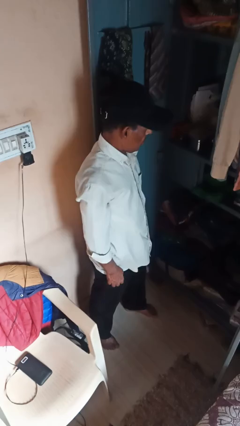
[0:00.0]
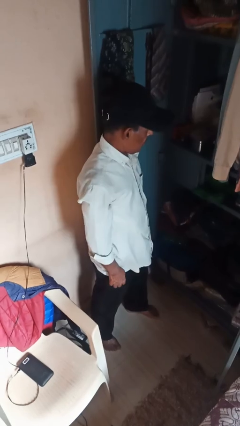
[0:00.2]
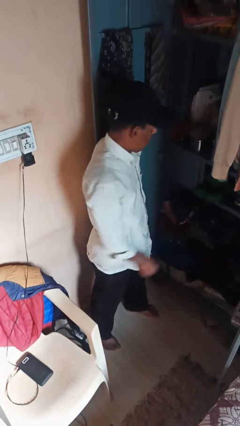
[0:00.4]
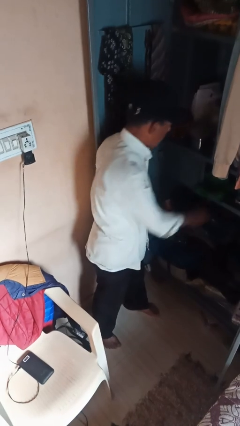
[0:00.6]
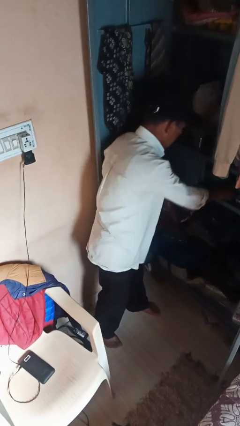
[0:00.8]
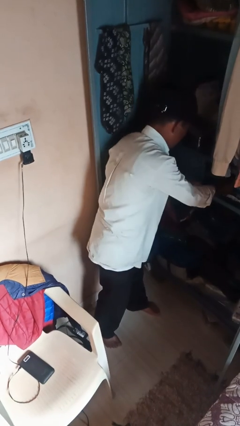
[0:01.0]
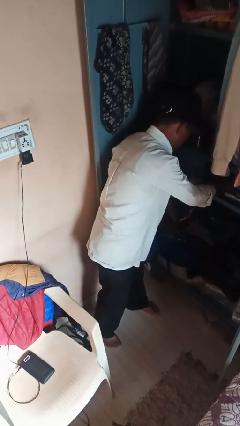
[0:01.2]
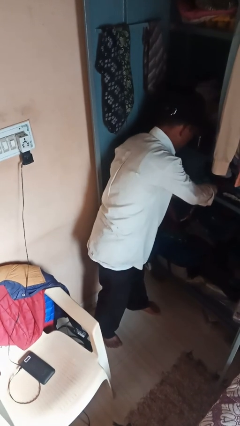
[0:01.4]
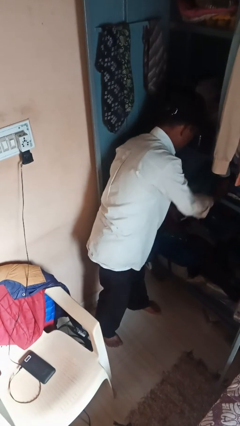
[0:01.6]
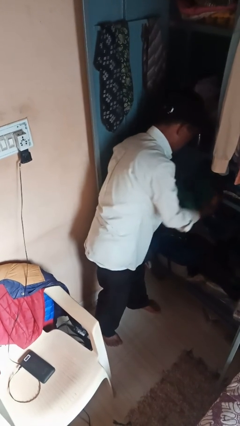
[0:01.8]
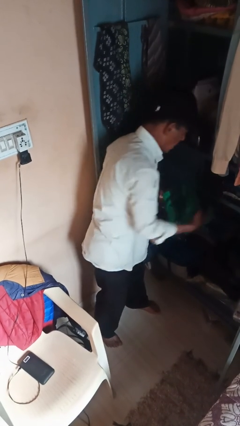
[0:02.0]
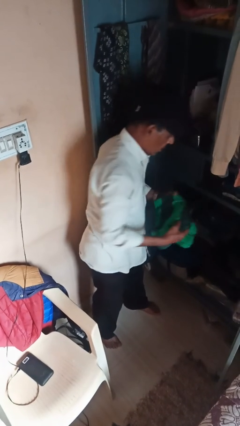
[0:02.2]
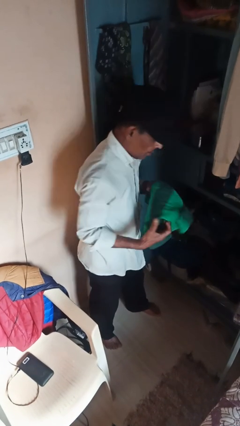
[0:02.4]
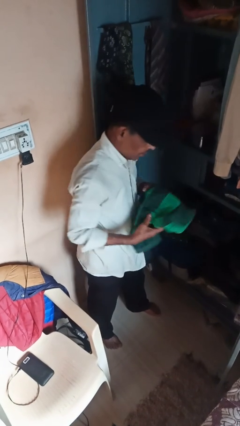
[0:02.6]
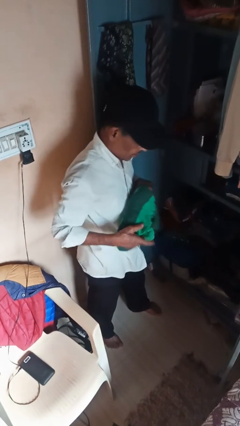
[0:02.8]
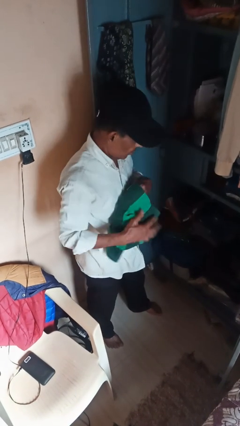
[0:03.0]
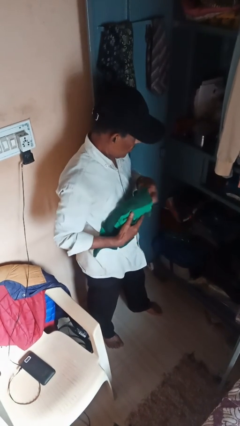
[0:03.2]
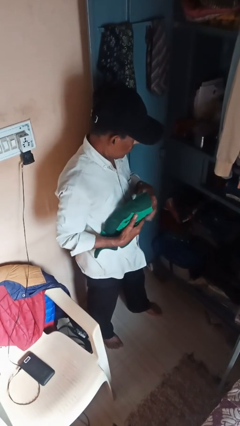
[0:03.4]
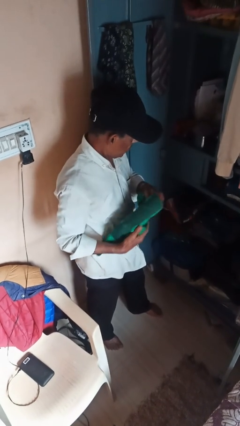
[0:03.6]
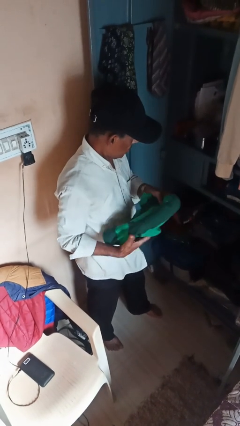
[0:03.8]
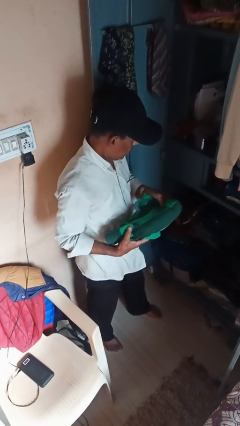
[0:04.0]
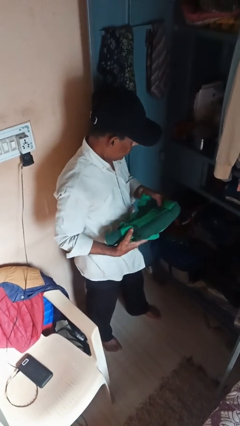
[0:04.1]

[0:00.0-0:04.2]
person takes clothes from dresser

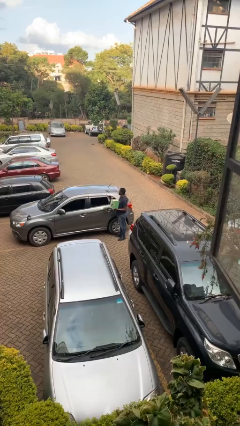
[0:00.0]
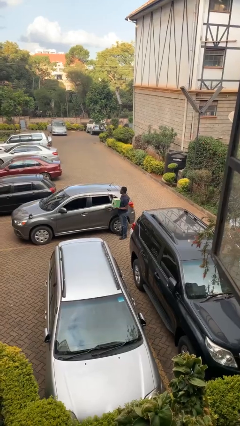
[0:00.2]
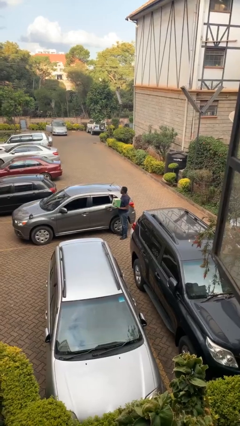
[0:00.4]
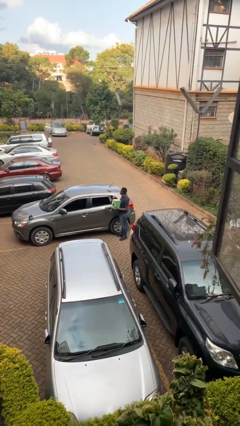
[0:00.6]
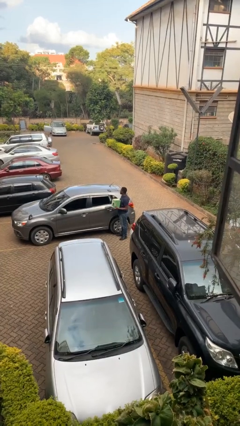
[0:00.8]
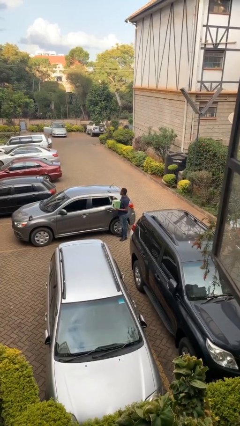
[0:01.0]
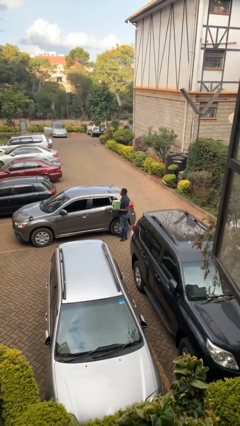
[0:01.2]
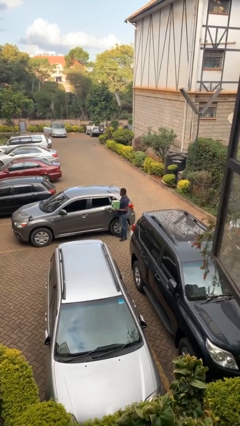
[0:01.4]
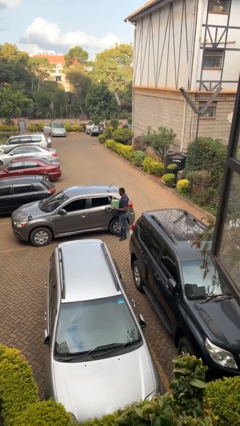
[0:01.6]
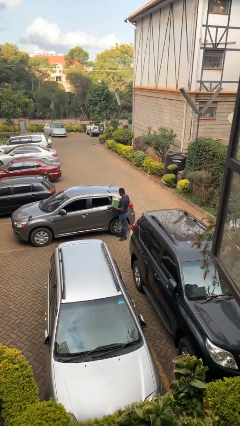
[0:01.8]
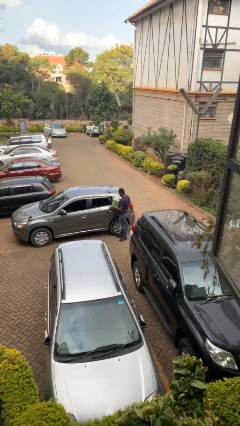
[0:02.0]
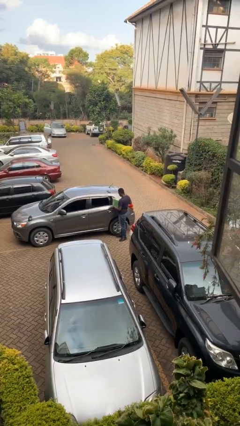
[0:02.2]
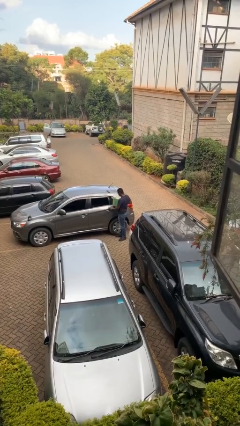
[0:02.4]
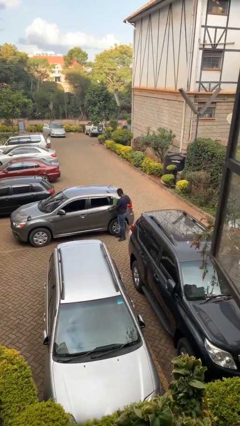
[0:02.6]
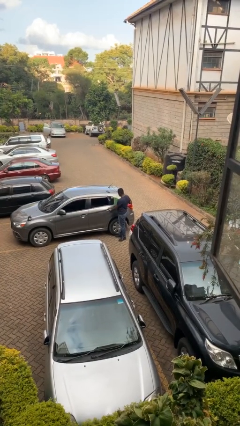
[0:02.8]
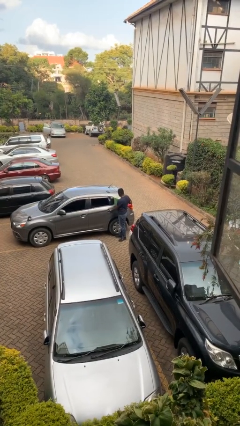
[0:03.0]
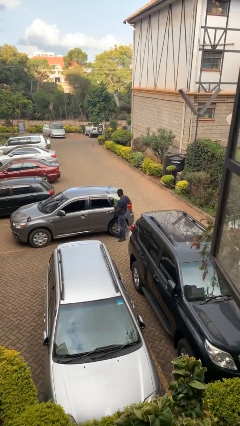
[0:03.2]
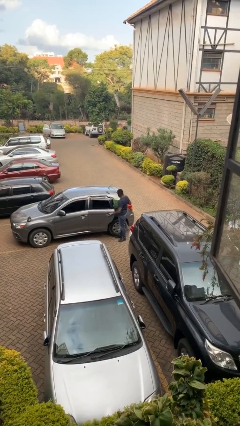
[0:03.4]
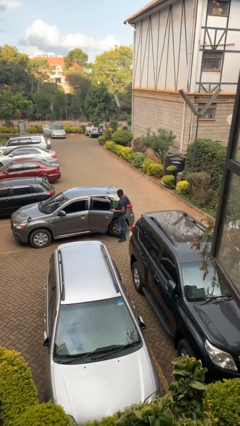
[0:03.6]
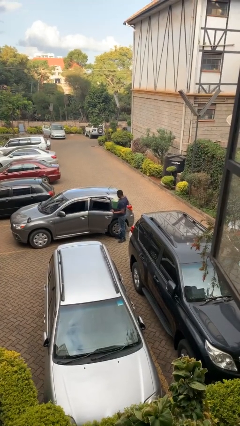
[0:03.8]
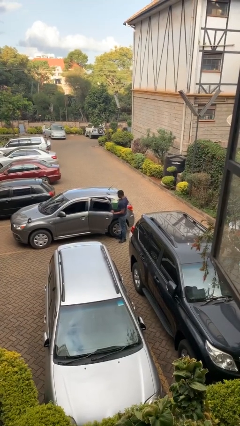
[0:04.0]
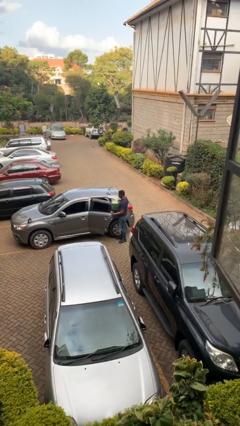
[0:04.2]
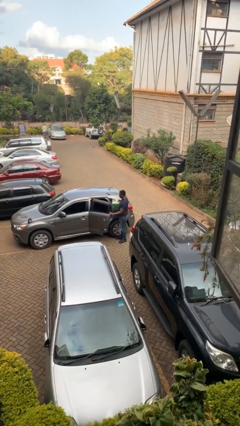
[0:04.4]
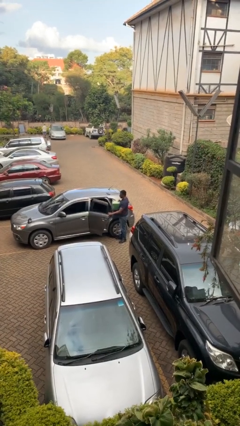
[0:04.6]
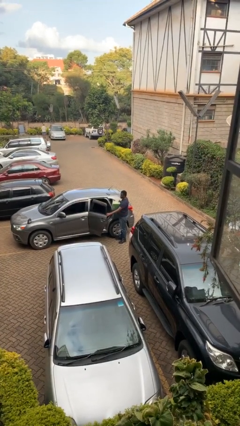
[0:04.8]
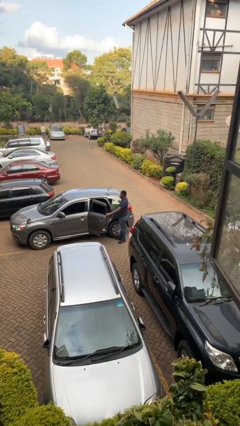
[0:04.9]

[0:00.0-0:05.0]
person opens car door

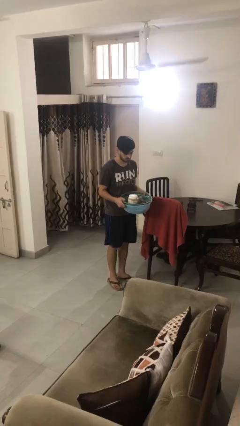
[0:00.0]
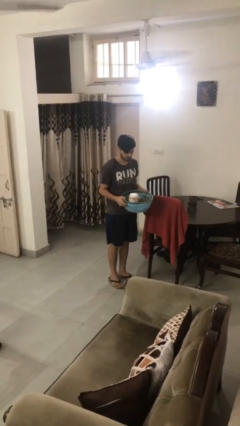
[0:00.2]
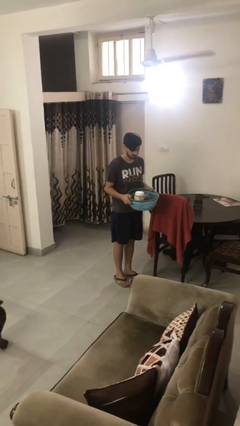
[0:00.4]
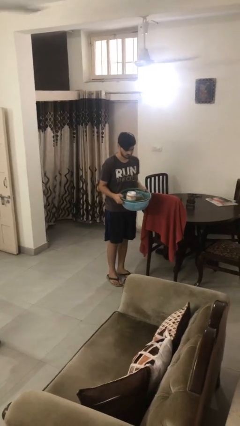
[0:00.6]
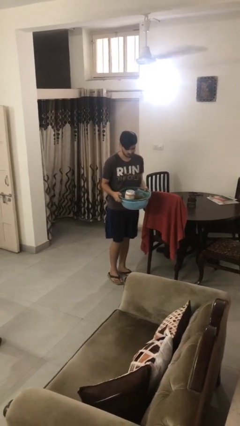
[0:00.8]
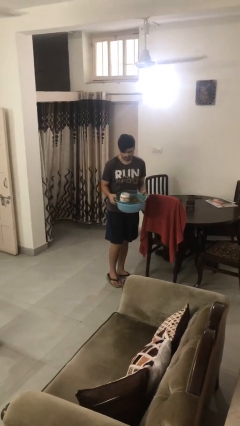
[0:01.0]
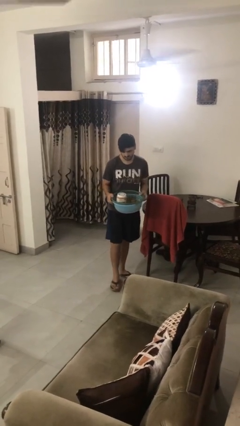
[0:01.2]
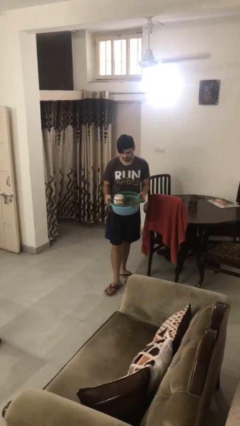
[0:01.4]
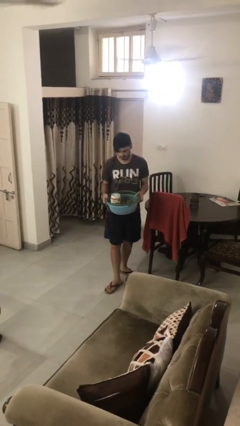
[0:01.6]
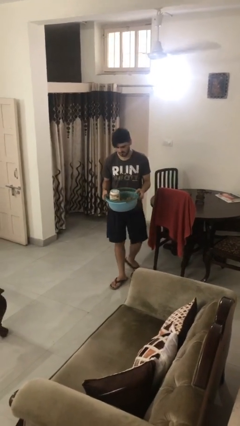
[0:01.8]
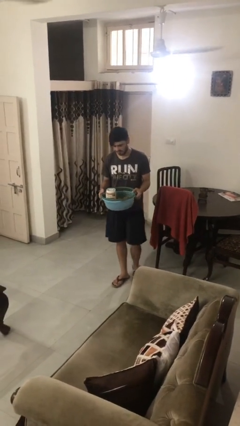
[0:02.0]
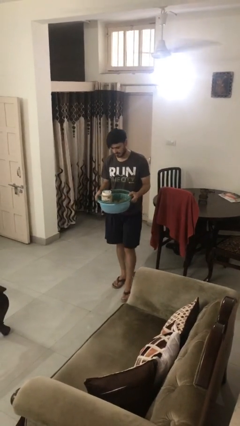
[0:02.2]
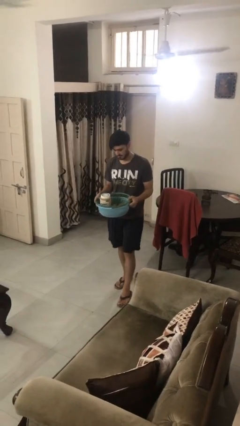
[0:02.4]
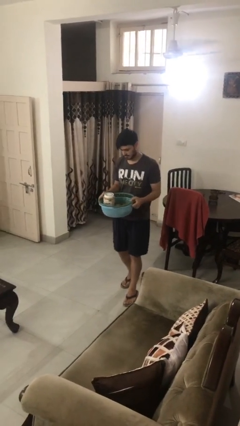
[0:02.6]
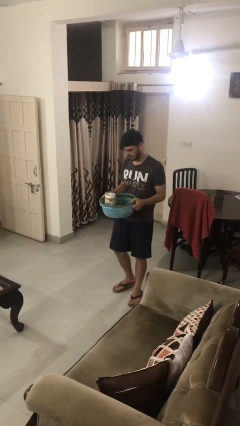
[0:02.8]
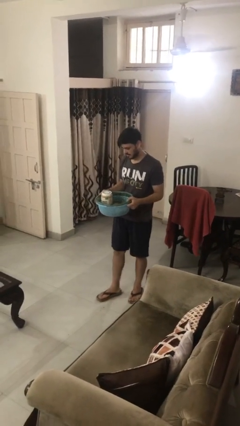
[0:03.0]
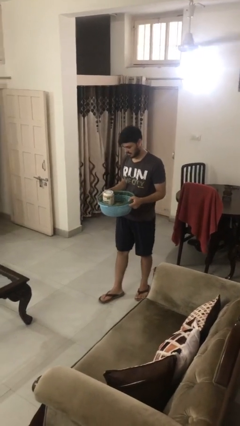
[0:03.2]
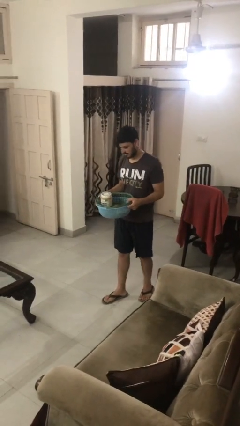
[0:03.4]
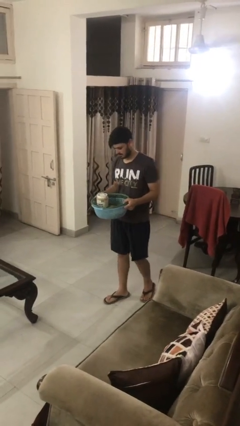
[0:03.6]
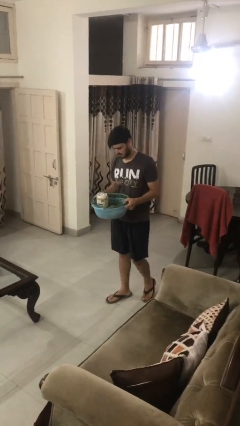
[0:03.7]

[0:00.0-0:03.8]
person carries groceries

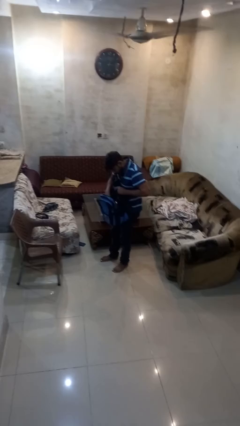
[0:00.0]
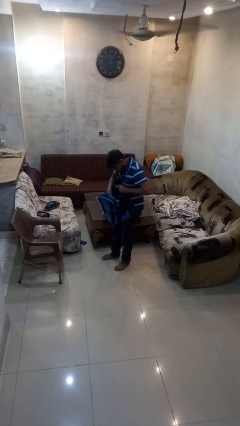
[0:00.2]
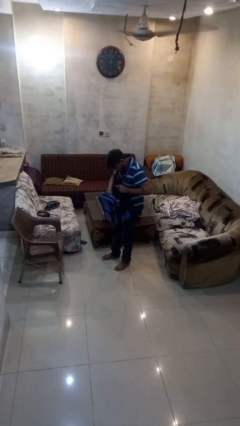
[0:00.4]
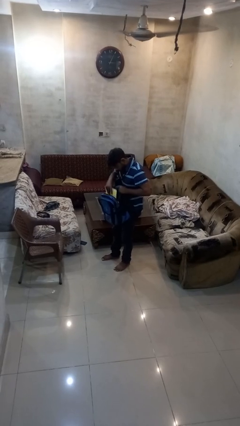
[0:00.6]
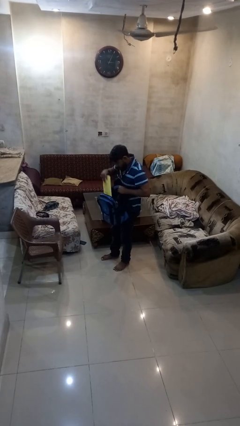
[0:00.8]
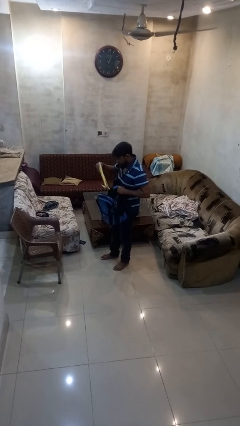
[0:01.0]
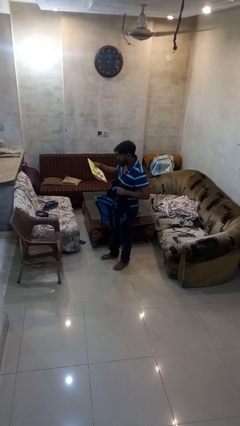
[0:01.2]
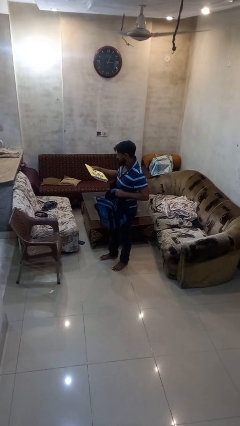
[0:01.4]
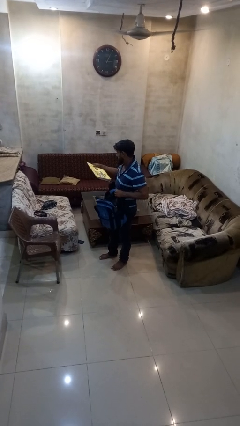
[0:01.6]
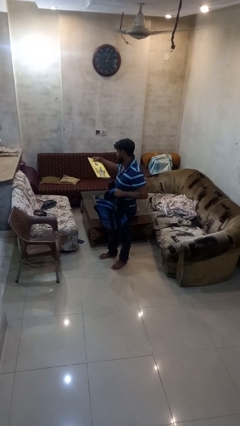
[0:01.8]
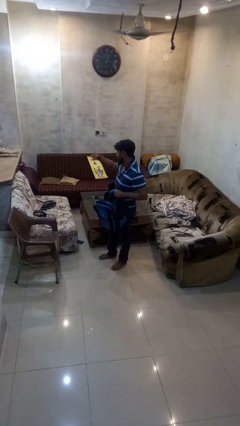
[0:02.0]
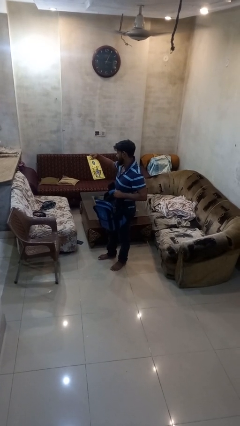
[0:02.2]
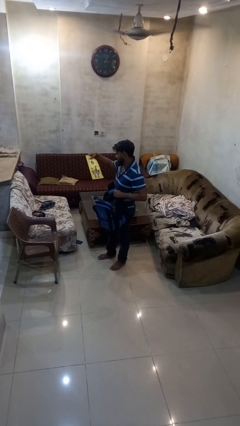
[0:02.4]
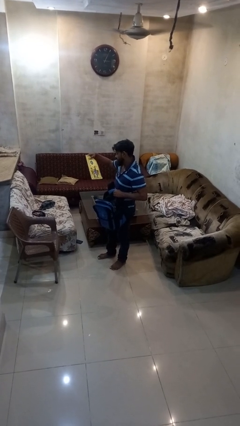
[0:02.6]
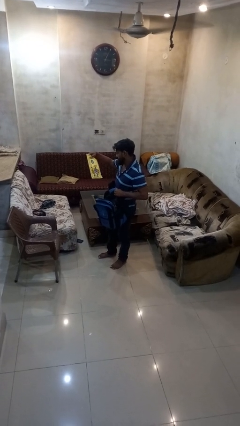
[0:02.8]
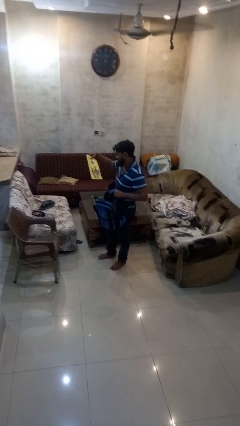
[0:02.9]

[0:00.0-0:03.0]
person takes object from backpack

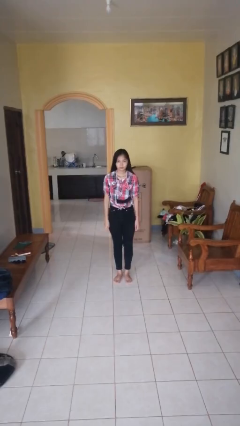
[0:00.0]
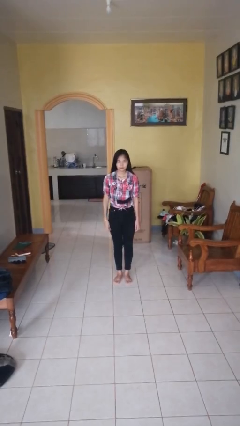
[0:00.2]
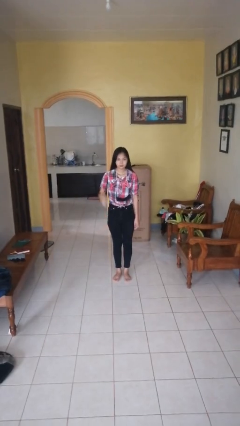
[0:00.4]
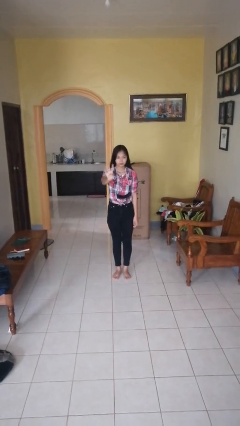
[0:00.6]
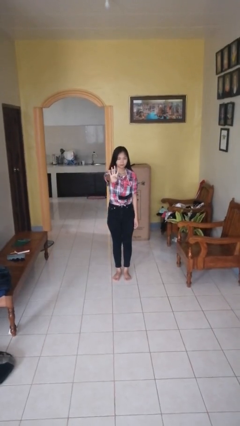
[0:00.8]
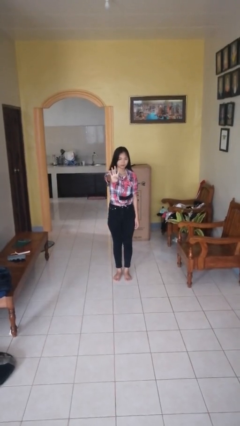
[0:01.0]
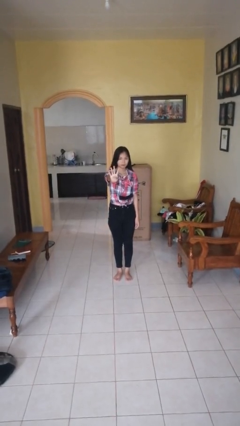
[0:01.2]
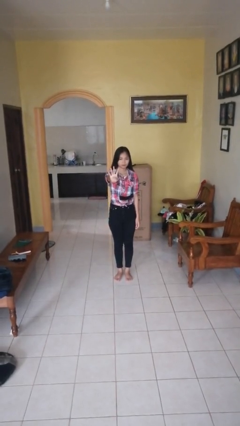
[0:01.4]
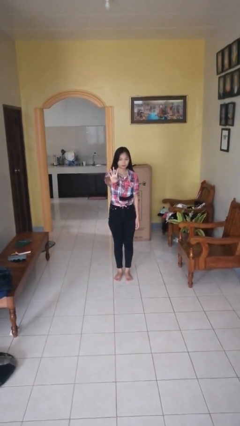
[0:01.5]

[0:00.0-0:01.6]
person gestures number four

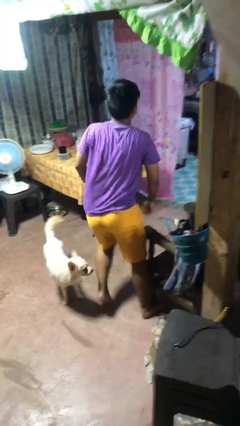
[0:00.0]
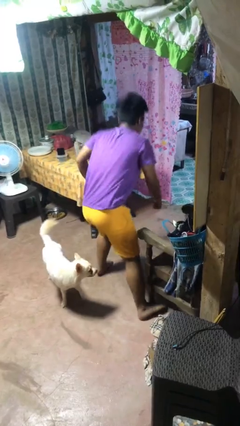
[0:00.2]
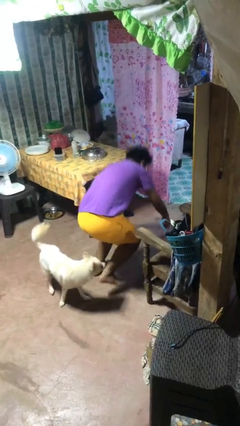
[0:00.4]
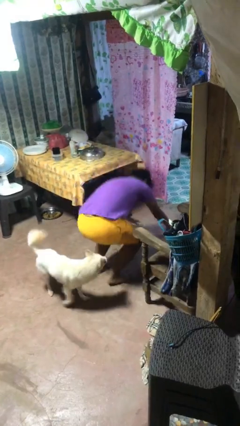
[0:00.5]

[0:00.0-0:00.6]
person trips on object on floor
